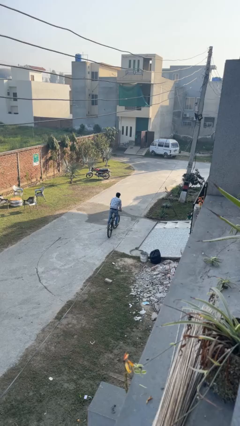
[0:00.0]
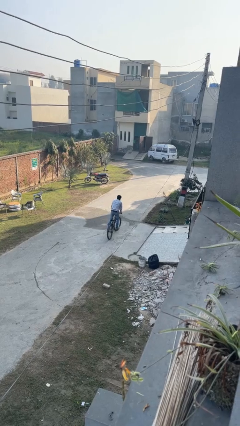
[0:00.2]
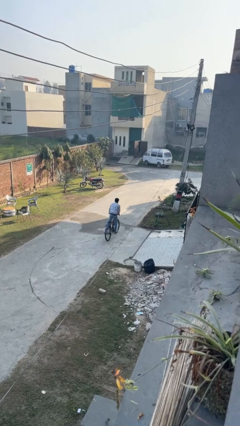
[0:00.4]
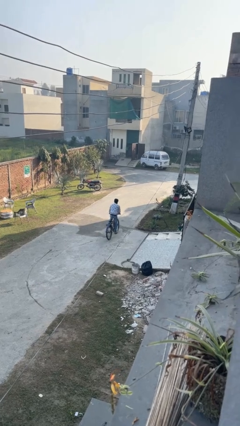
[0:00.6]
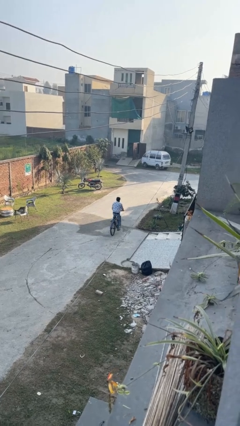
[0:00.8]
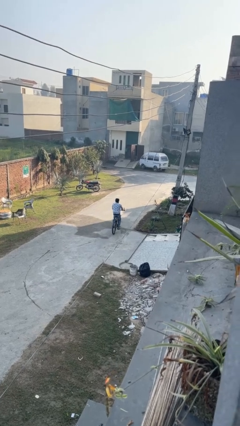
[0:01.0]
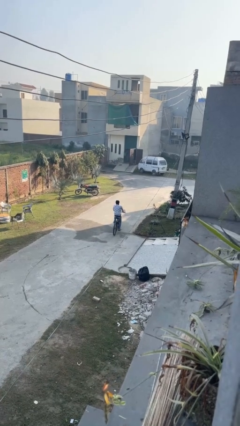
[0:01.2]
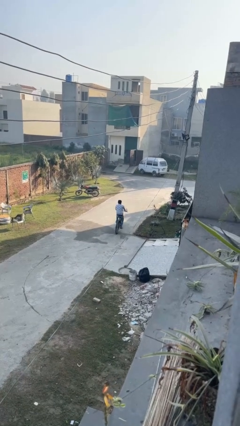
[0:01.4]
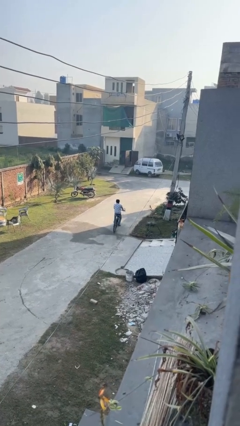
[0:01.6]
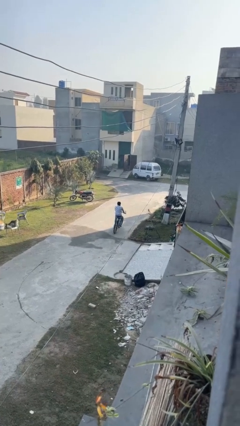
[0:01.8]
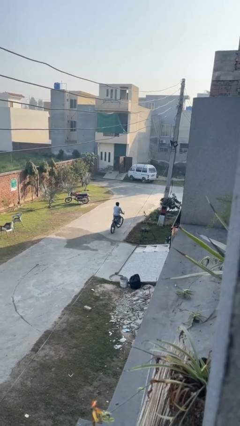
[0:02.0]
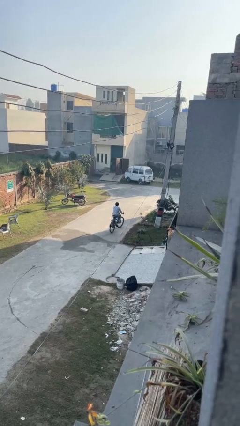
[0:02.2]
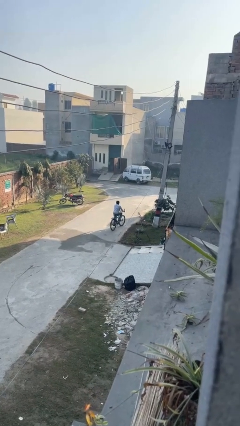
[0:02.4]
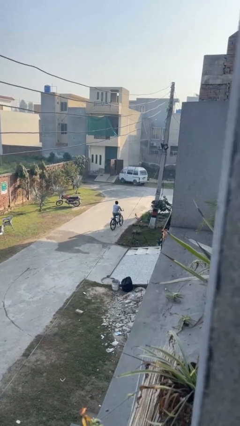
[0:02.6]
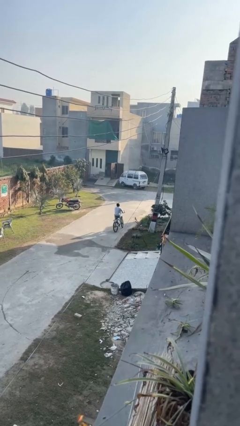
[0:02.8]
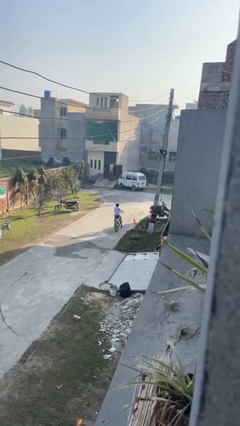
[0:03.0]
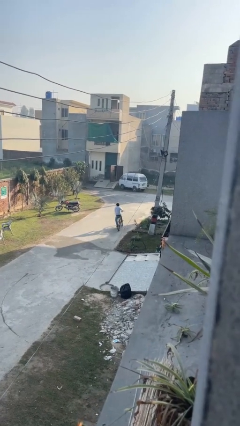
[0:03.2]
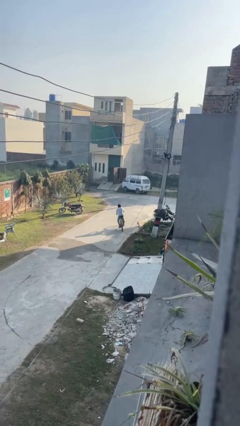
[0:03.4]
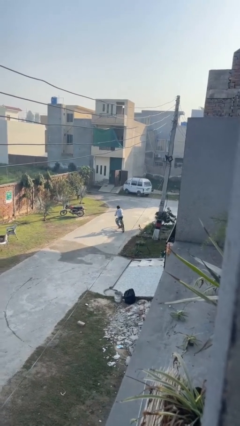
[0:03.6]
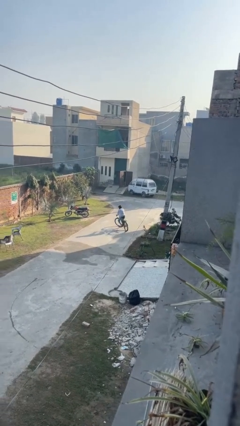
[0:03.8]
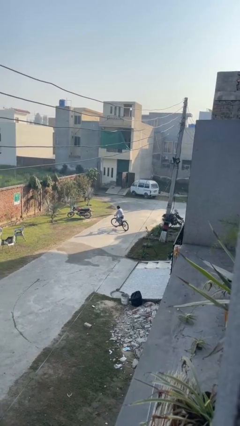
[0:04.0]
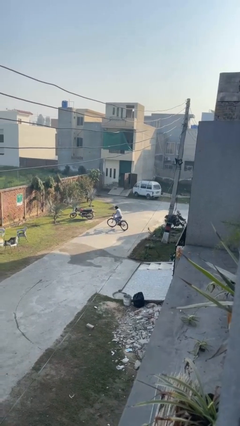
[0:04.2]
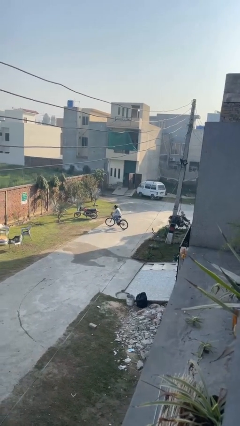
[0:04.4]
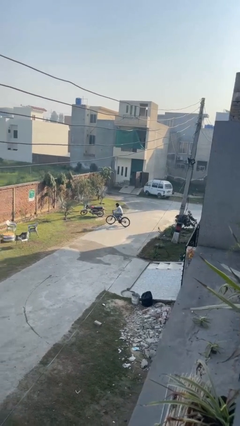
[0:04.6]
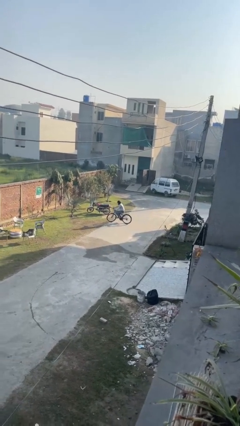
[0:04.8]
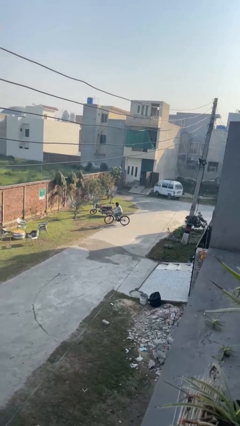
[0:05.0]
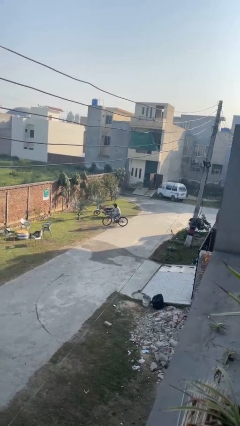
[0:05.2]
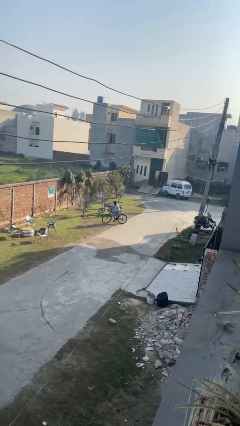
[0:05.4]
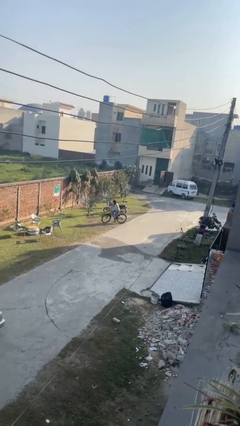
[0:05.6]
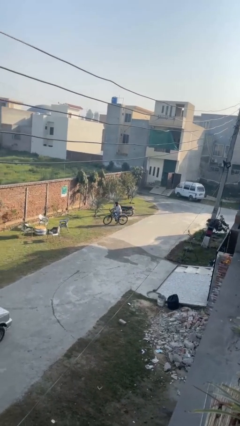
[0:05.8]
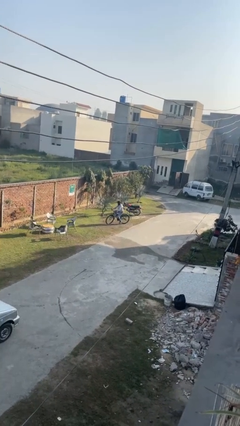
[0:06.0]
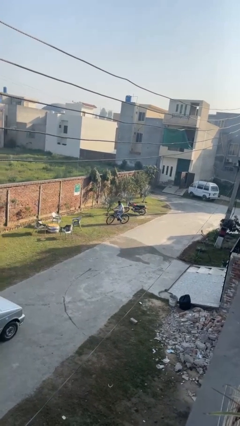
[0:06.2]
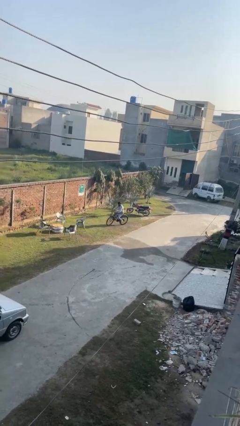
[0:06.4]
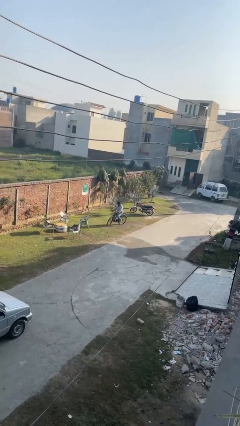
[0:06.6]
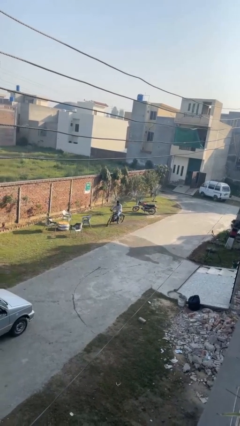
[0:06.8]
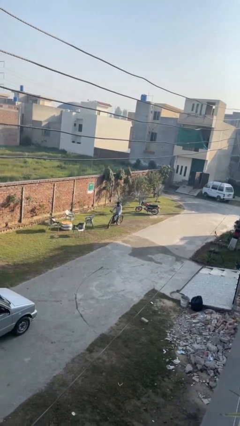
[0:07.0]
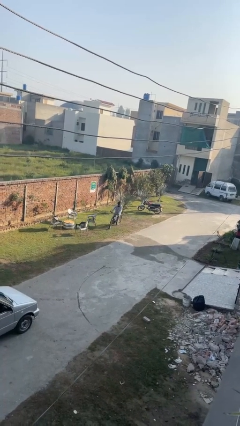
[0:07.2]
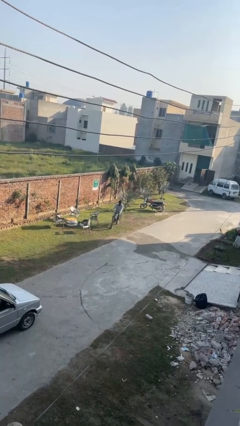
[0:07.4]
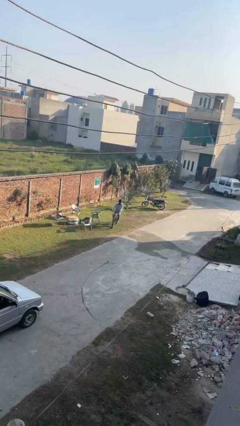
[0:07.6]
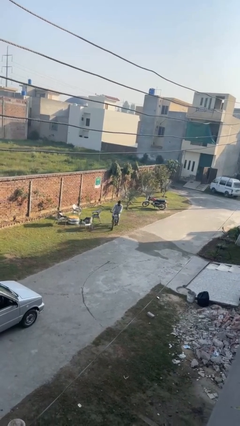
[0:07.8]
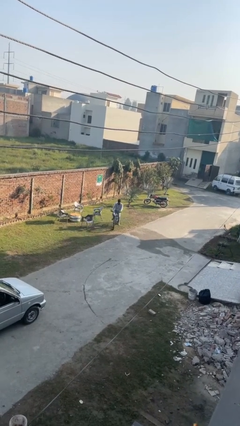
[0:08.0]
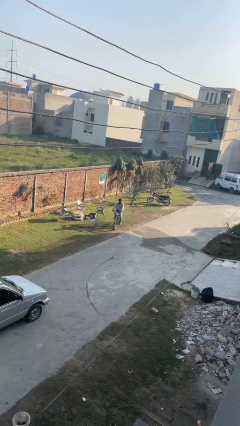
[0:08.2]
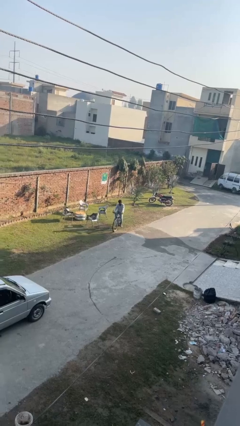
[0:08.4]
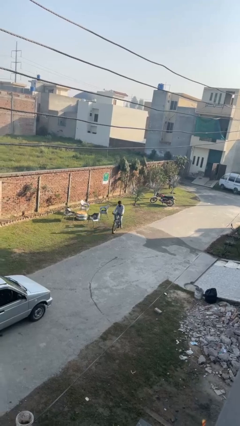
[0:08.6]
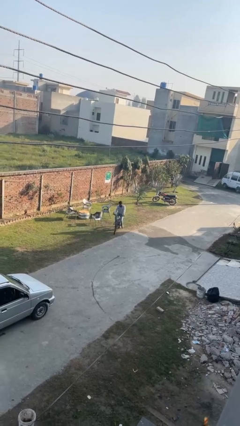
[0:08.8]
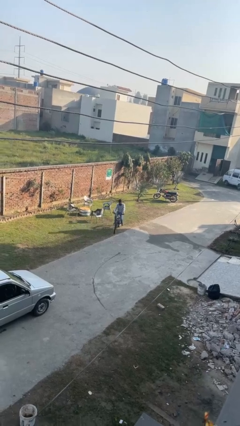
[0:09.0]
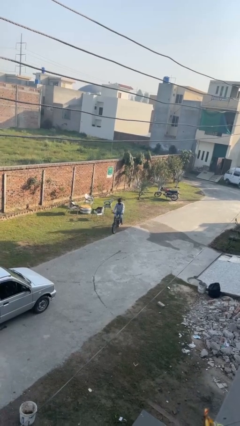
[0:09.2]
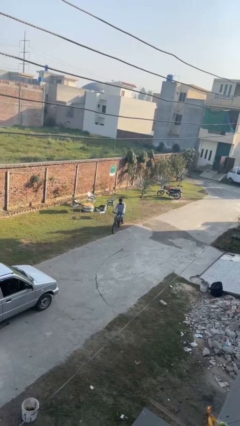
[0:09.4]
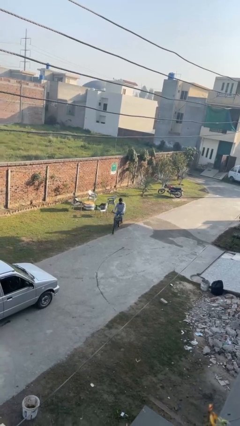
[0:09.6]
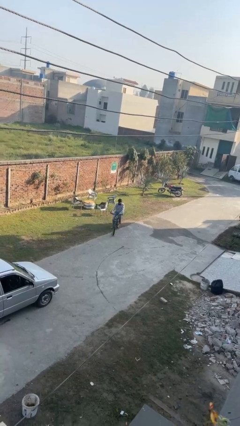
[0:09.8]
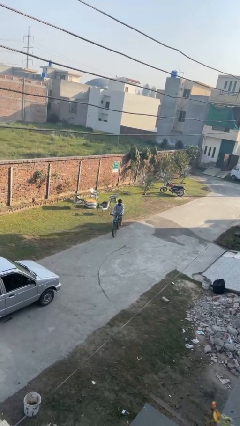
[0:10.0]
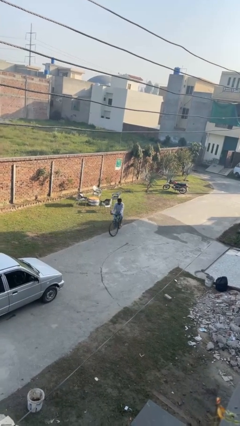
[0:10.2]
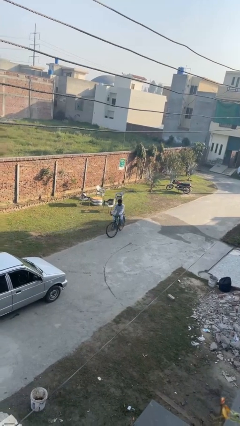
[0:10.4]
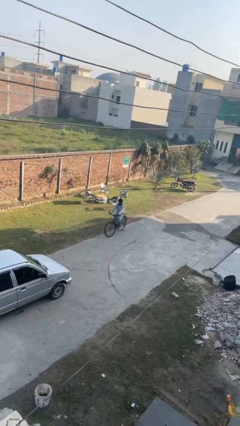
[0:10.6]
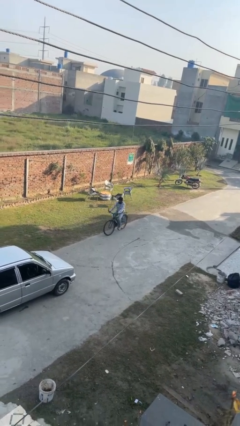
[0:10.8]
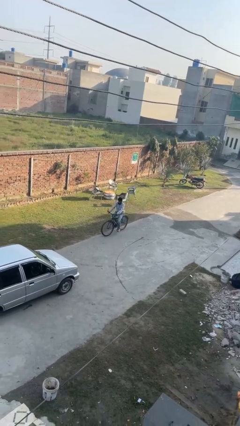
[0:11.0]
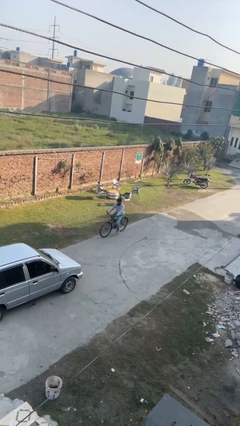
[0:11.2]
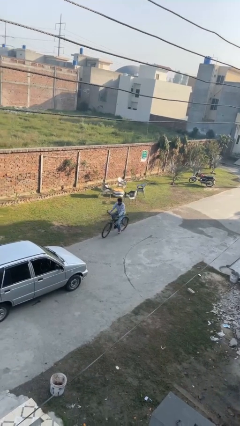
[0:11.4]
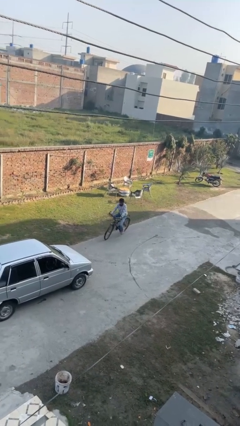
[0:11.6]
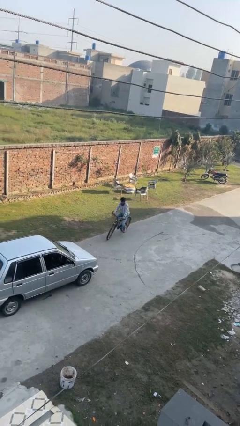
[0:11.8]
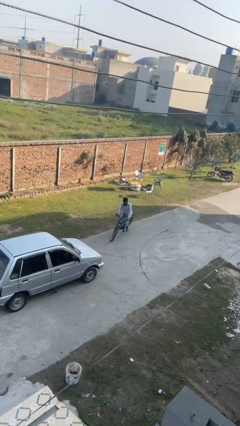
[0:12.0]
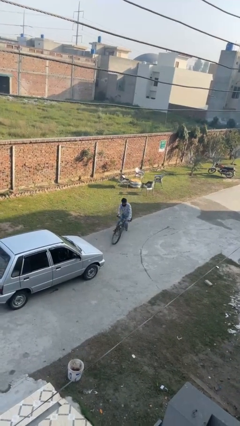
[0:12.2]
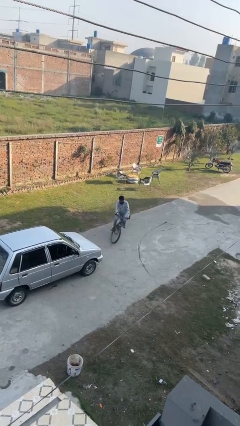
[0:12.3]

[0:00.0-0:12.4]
person rides bicycle

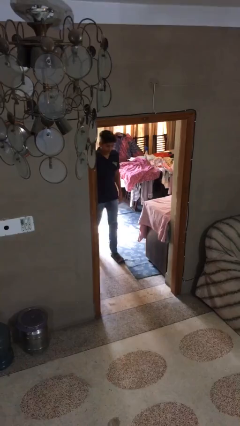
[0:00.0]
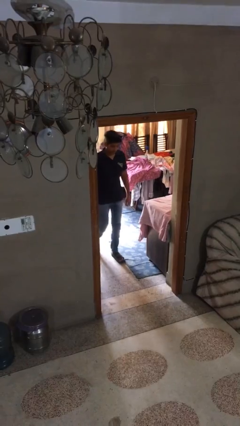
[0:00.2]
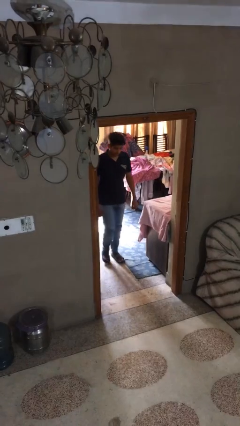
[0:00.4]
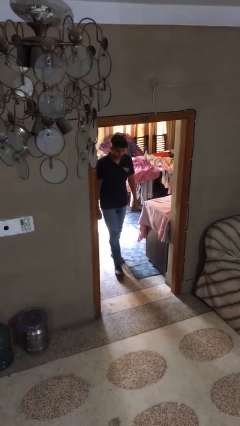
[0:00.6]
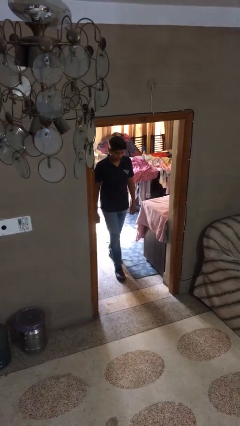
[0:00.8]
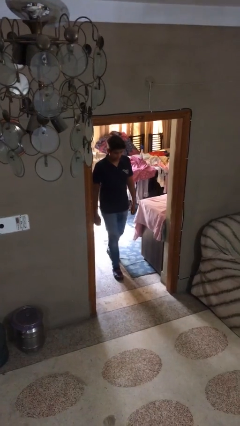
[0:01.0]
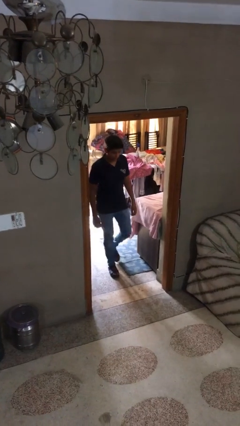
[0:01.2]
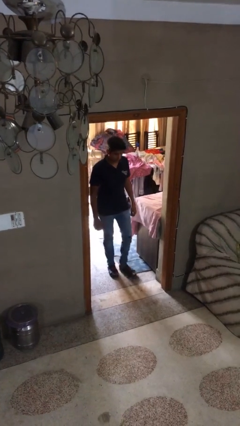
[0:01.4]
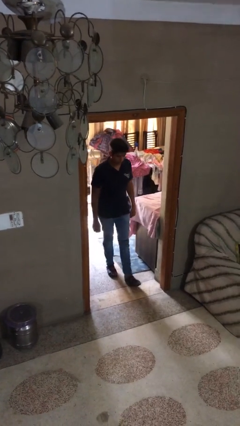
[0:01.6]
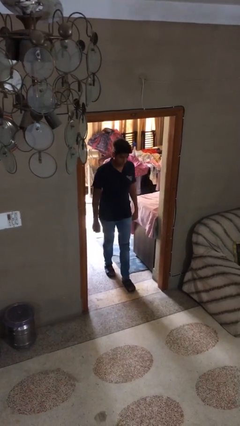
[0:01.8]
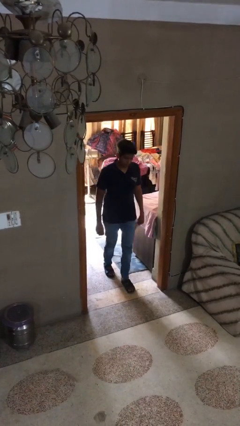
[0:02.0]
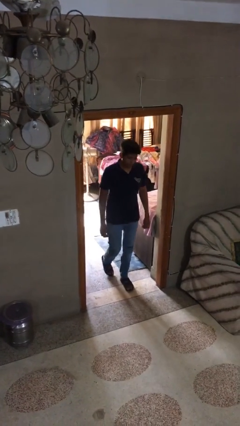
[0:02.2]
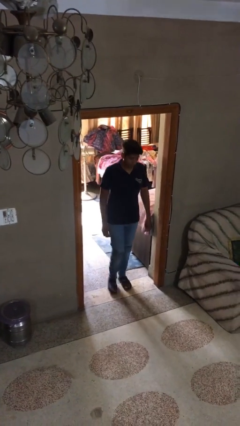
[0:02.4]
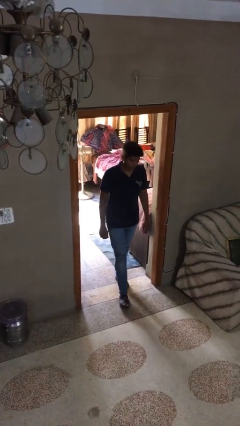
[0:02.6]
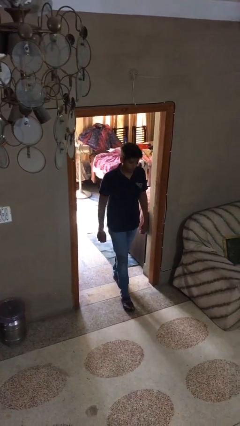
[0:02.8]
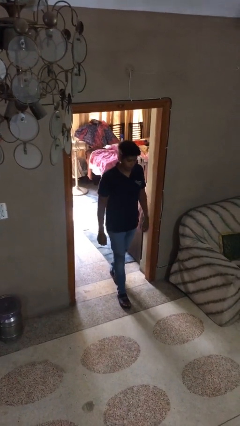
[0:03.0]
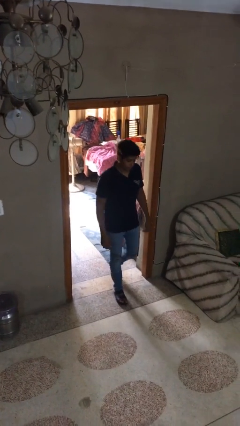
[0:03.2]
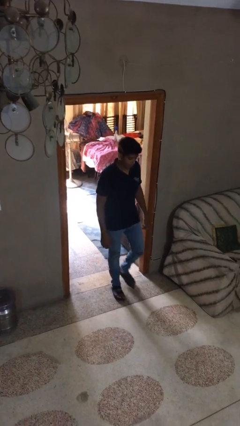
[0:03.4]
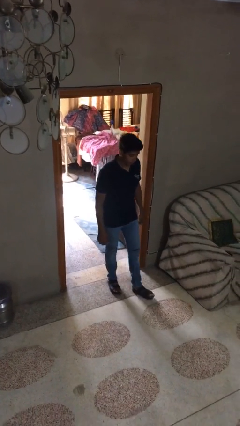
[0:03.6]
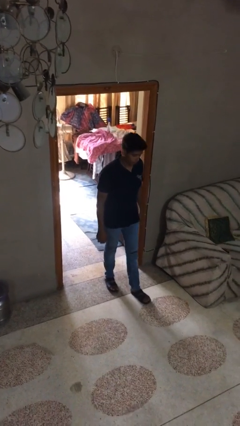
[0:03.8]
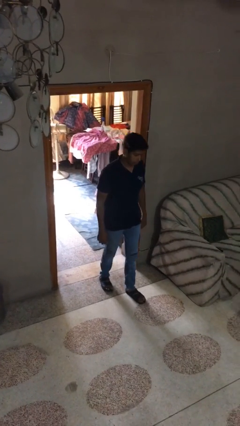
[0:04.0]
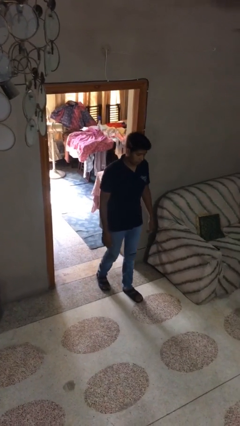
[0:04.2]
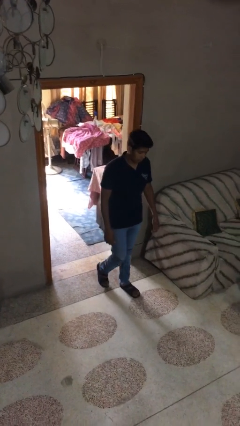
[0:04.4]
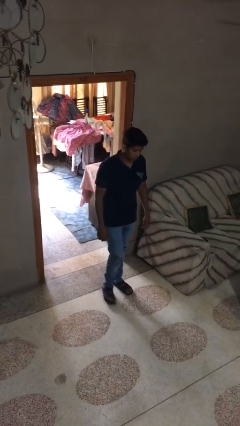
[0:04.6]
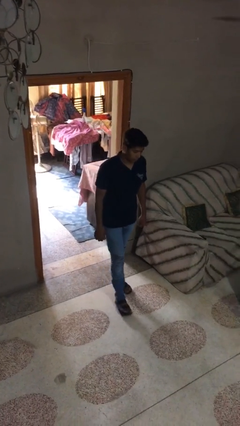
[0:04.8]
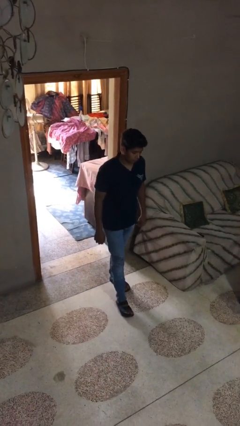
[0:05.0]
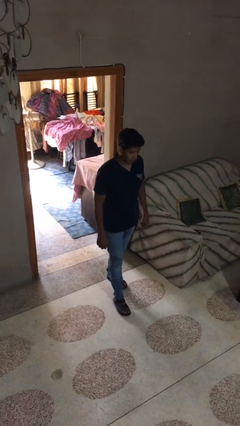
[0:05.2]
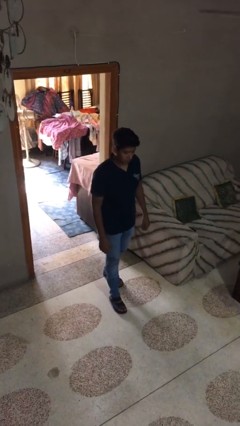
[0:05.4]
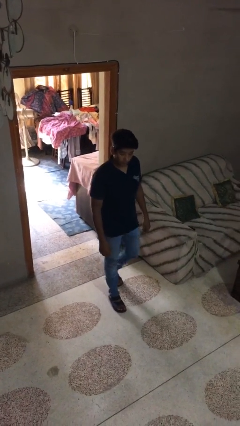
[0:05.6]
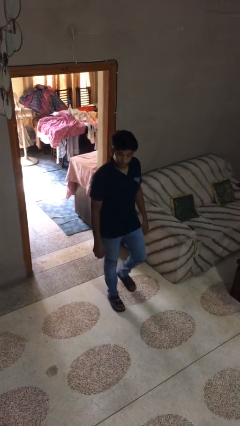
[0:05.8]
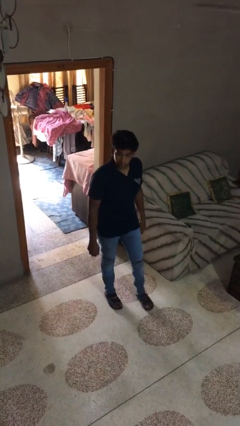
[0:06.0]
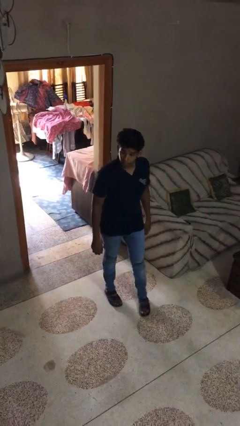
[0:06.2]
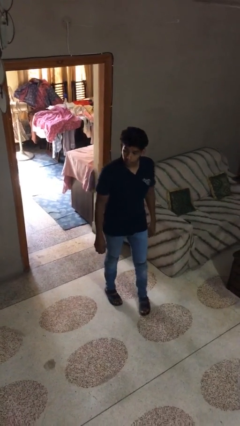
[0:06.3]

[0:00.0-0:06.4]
person enters scene through structure

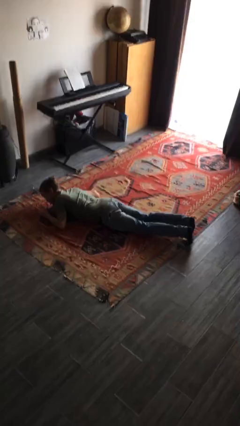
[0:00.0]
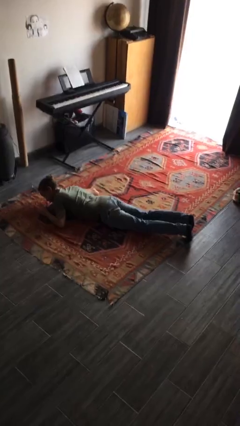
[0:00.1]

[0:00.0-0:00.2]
person exercises with pushup
